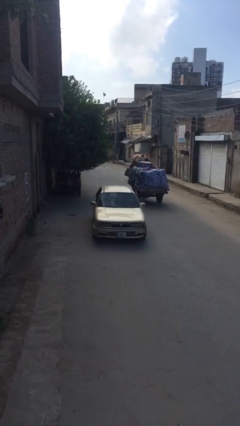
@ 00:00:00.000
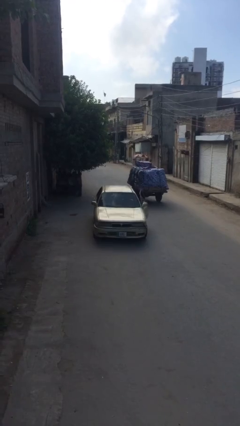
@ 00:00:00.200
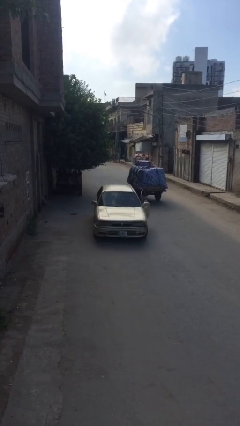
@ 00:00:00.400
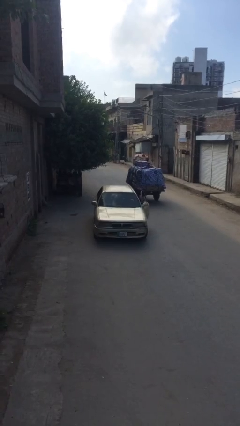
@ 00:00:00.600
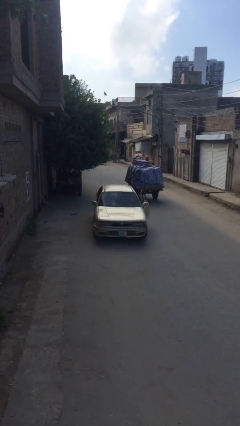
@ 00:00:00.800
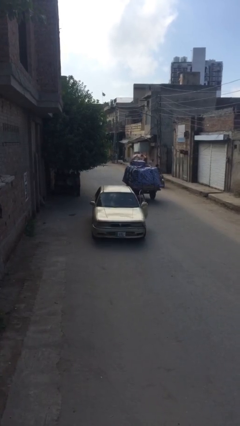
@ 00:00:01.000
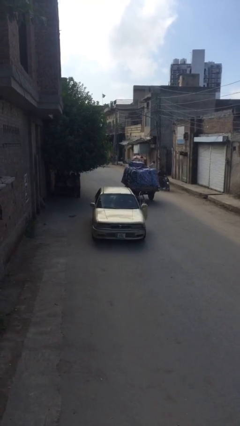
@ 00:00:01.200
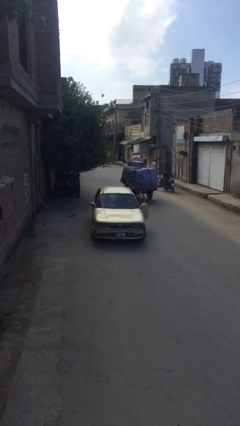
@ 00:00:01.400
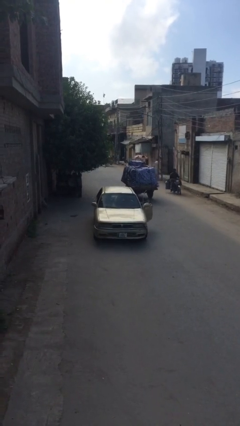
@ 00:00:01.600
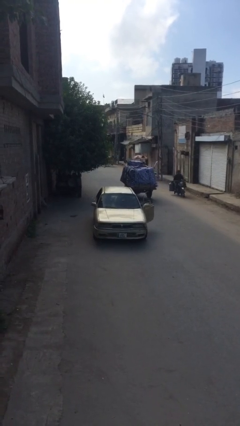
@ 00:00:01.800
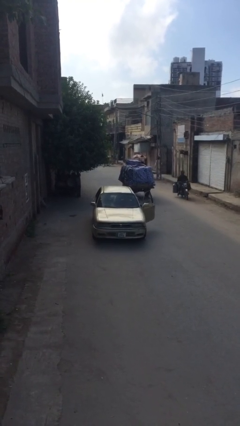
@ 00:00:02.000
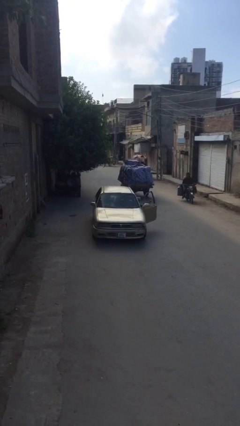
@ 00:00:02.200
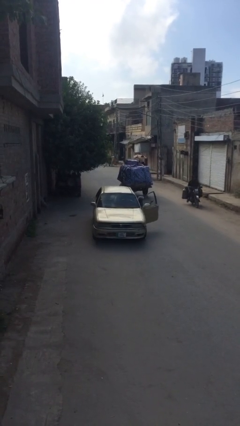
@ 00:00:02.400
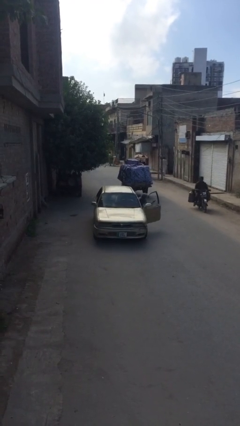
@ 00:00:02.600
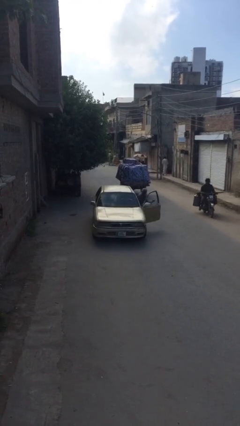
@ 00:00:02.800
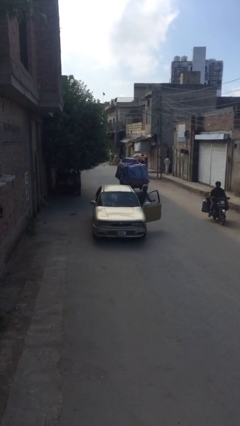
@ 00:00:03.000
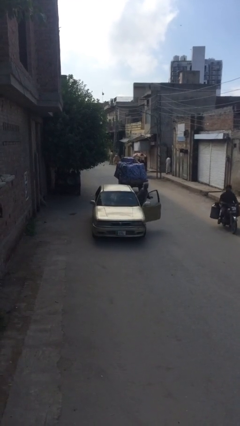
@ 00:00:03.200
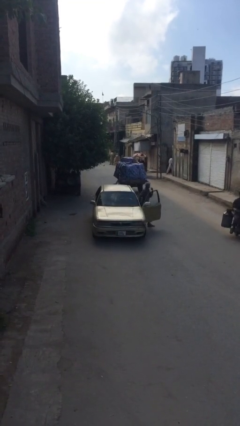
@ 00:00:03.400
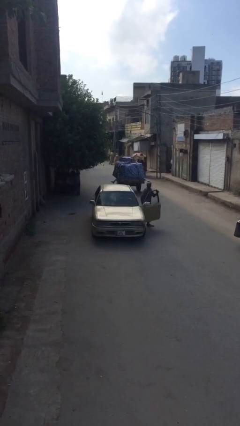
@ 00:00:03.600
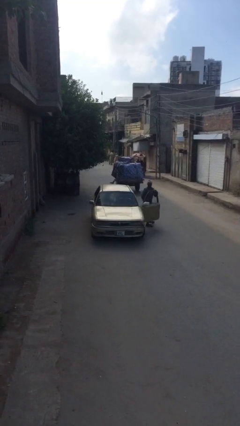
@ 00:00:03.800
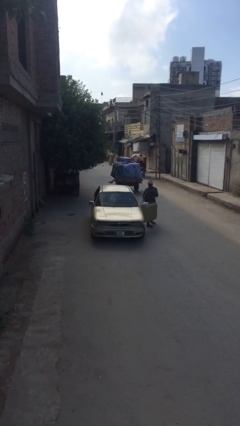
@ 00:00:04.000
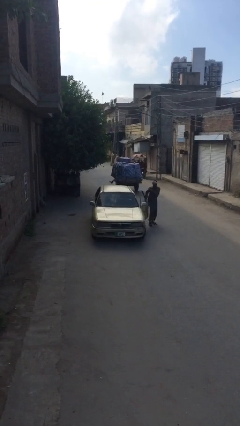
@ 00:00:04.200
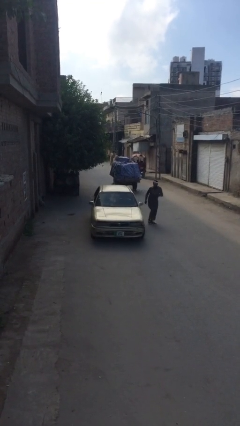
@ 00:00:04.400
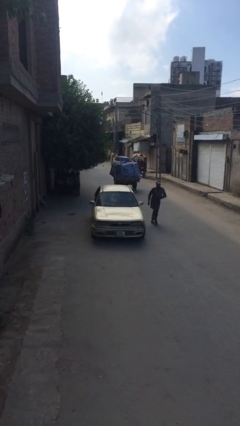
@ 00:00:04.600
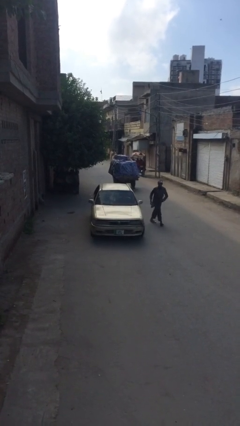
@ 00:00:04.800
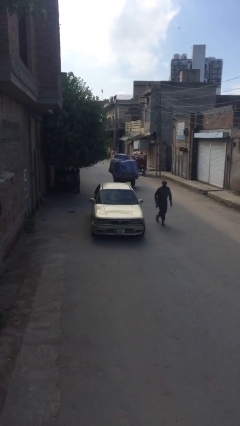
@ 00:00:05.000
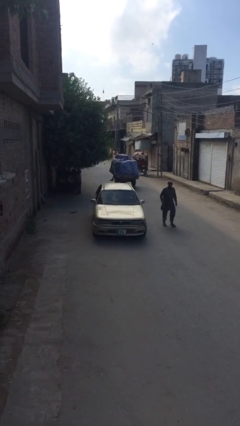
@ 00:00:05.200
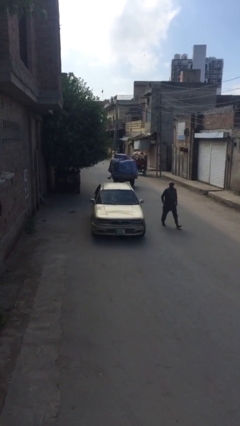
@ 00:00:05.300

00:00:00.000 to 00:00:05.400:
car drops off person

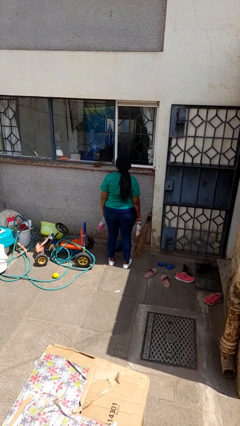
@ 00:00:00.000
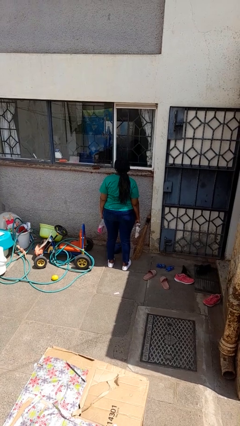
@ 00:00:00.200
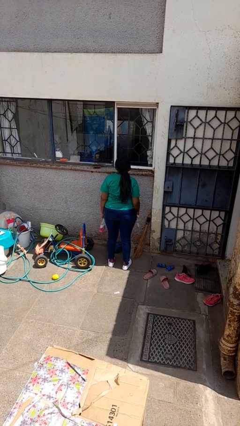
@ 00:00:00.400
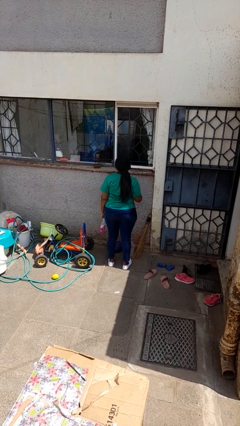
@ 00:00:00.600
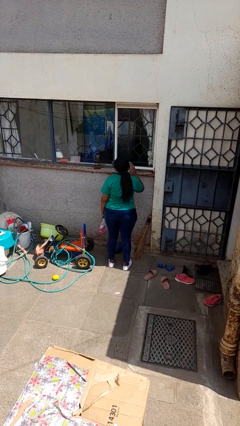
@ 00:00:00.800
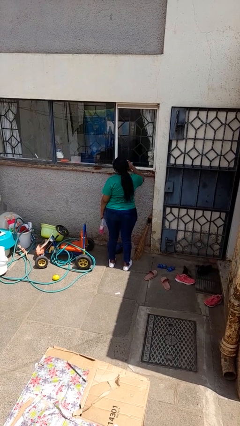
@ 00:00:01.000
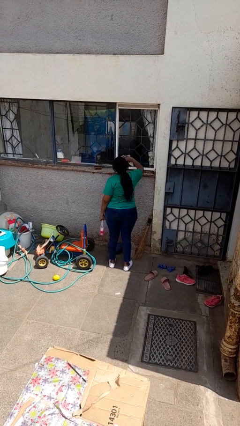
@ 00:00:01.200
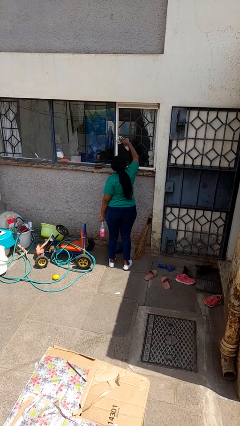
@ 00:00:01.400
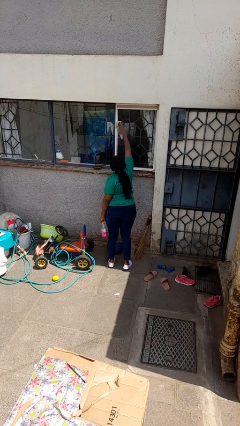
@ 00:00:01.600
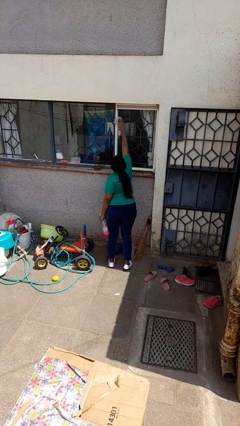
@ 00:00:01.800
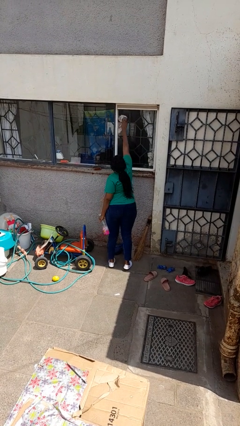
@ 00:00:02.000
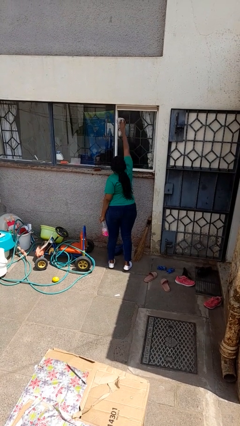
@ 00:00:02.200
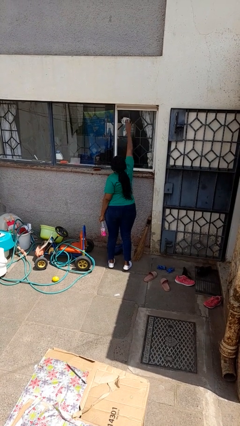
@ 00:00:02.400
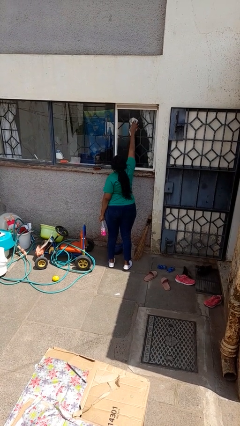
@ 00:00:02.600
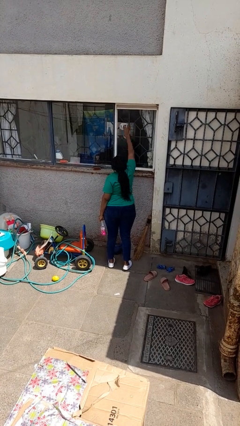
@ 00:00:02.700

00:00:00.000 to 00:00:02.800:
person washes window

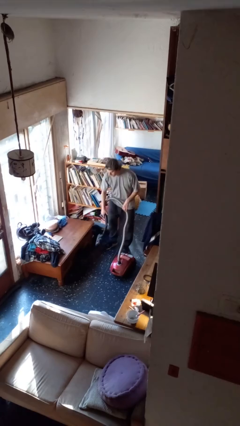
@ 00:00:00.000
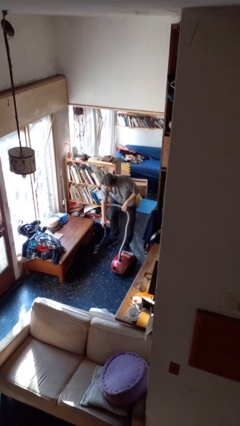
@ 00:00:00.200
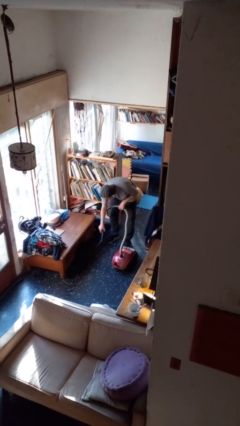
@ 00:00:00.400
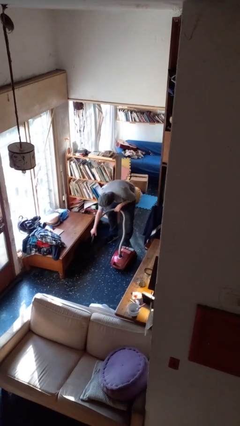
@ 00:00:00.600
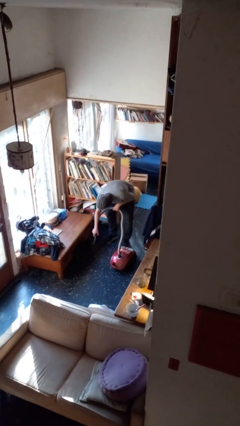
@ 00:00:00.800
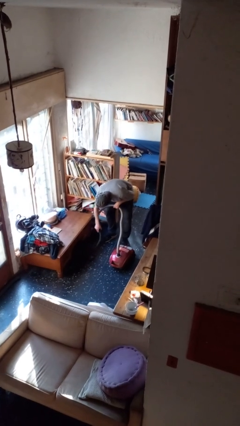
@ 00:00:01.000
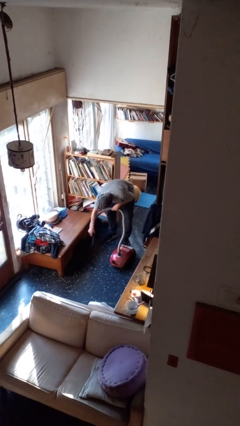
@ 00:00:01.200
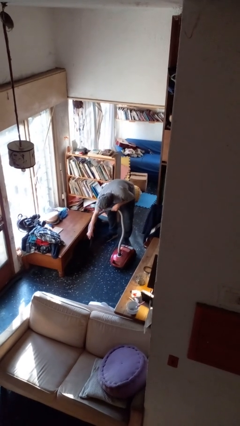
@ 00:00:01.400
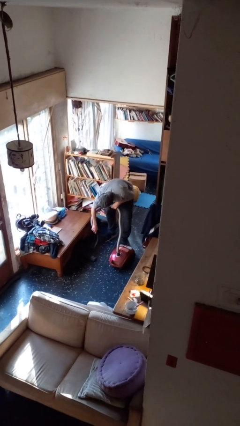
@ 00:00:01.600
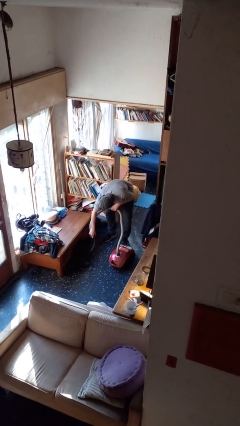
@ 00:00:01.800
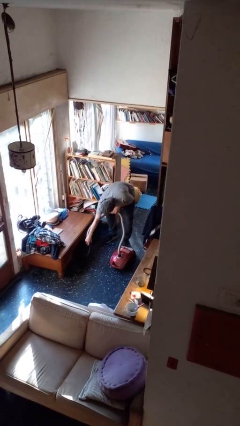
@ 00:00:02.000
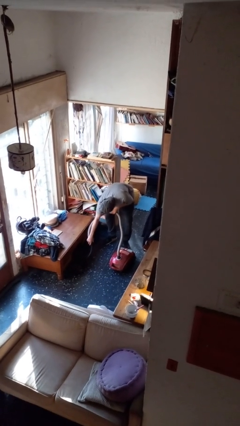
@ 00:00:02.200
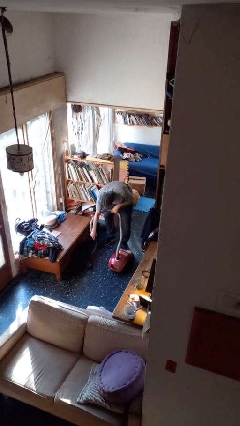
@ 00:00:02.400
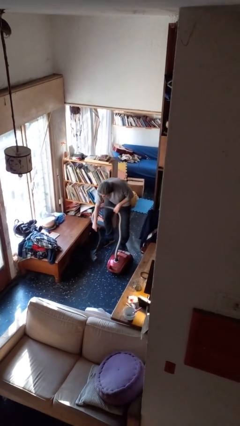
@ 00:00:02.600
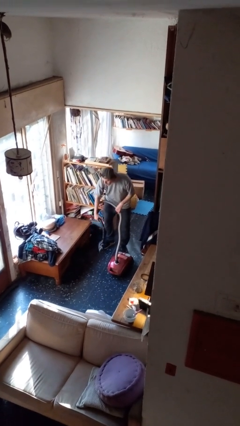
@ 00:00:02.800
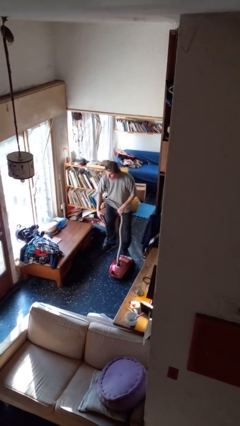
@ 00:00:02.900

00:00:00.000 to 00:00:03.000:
person vacuums carpet

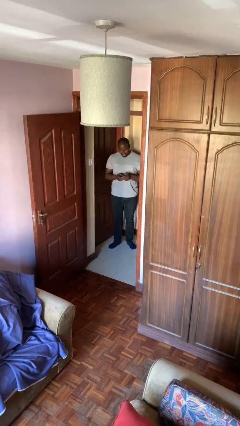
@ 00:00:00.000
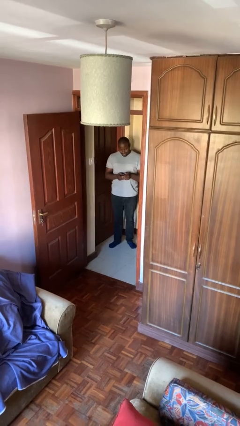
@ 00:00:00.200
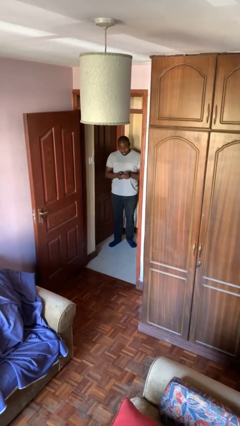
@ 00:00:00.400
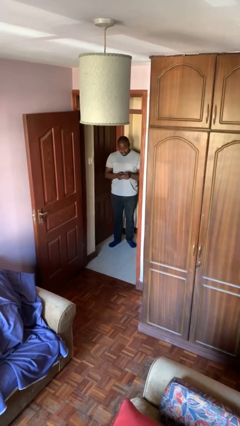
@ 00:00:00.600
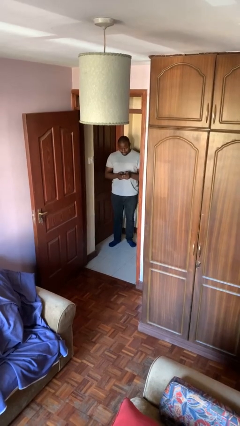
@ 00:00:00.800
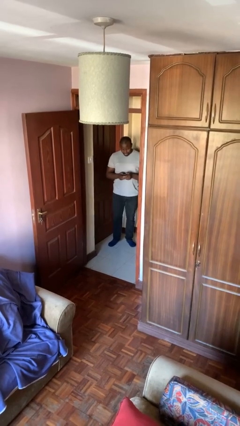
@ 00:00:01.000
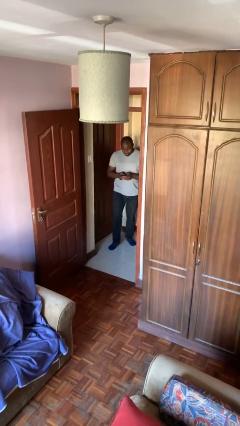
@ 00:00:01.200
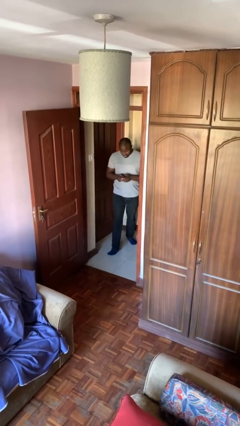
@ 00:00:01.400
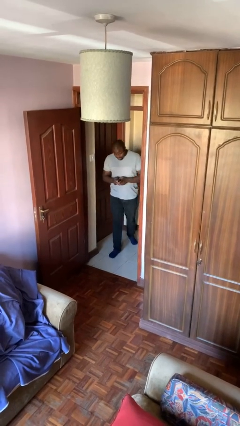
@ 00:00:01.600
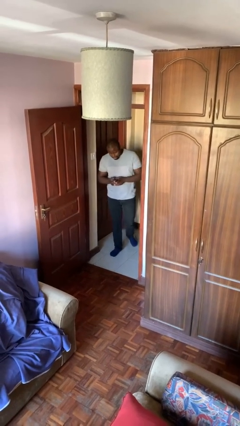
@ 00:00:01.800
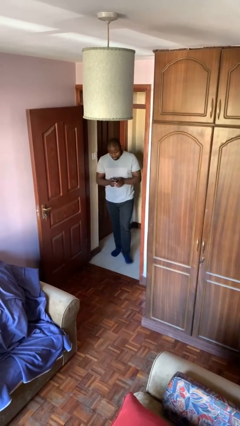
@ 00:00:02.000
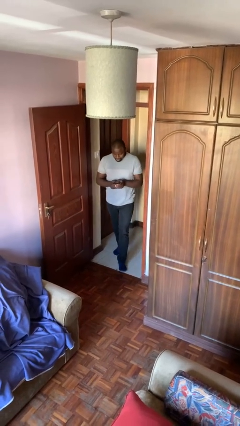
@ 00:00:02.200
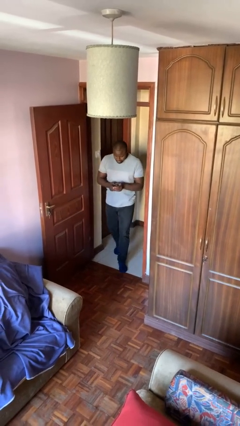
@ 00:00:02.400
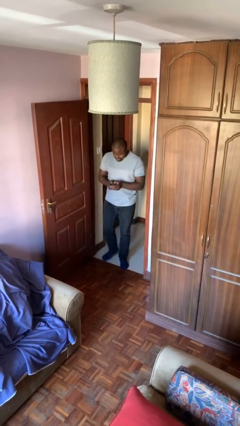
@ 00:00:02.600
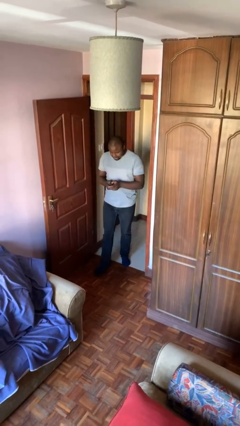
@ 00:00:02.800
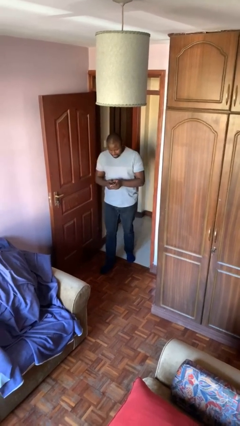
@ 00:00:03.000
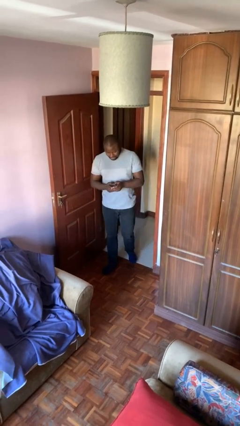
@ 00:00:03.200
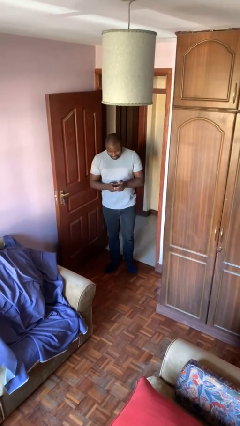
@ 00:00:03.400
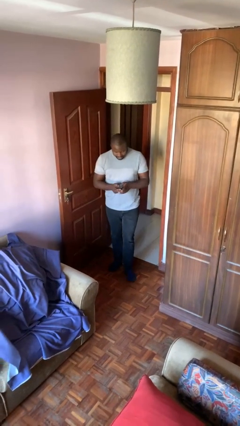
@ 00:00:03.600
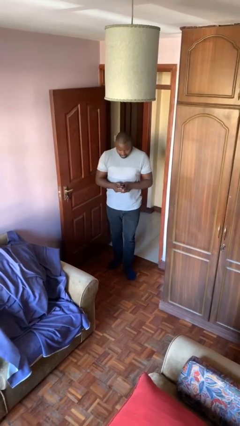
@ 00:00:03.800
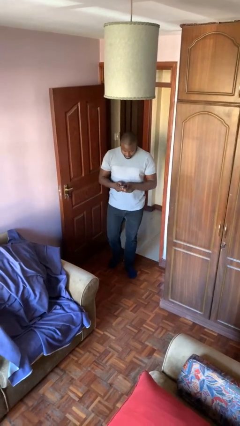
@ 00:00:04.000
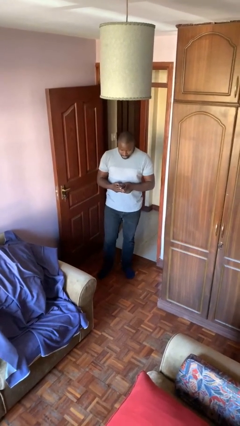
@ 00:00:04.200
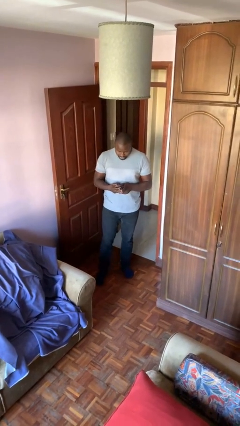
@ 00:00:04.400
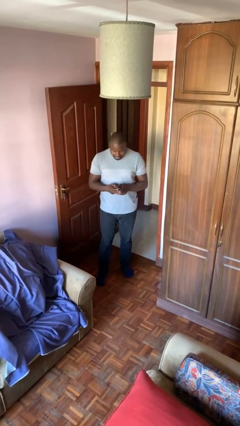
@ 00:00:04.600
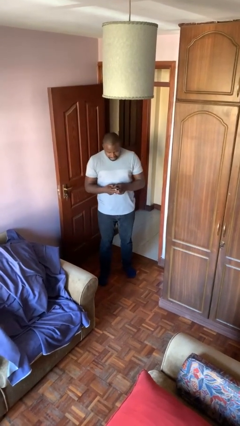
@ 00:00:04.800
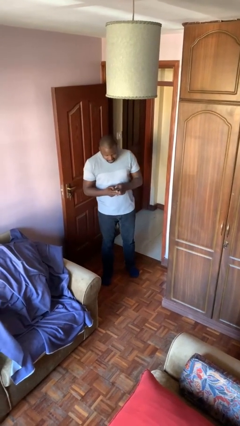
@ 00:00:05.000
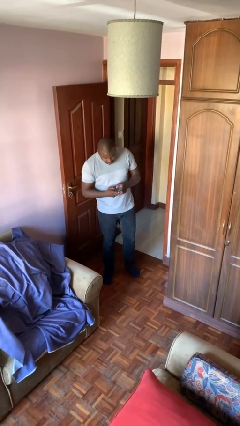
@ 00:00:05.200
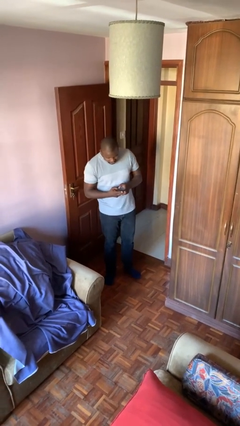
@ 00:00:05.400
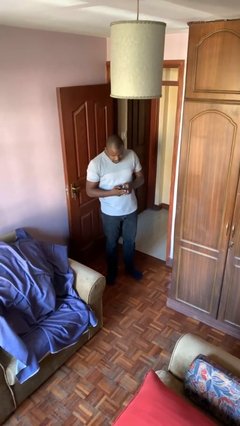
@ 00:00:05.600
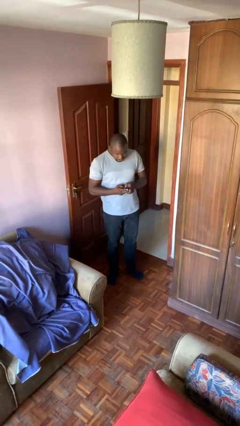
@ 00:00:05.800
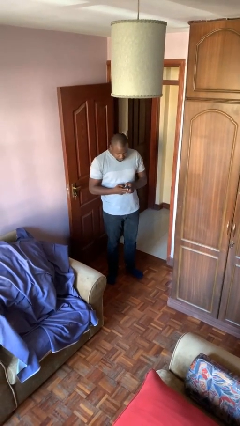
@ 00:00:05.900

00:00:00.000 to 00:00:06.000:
person enters scene through structure
